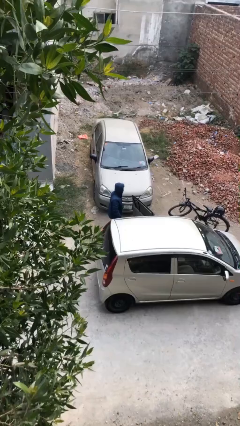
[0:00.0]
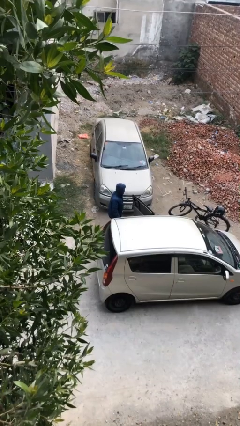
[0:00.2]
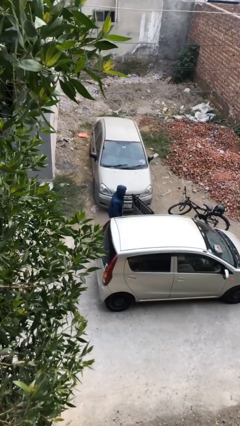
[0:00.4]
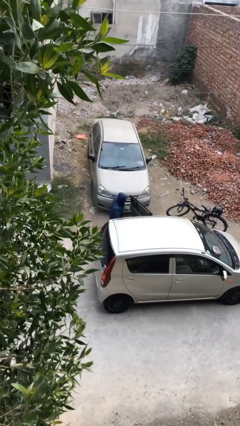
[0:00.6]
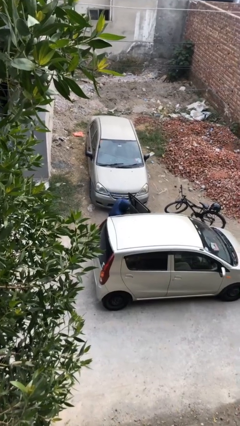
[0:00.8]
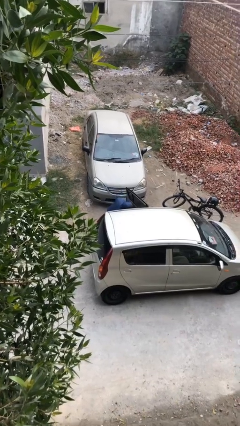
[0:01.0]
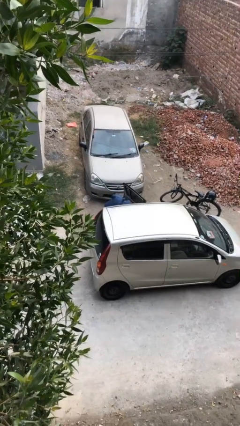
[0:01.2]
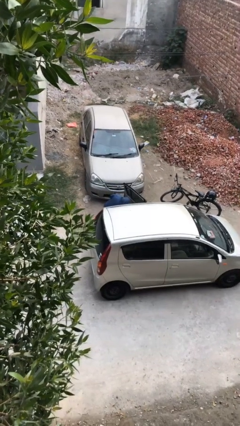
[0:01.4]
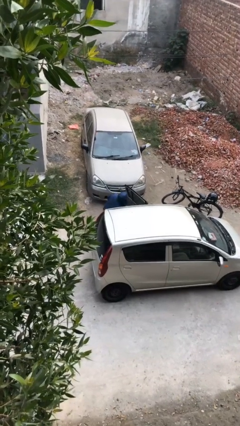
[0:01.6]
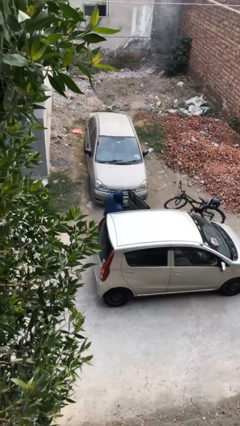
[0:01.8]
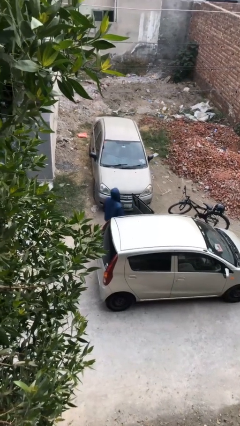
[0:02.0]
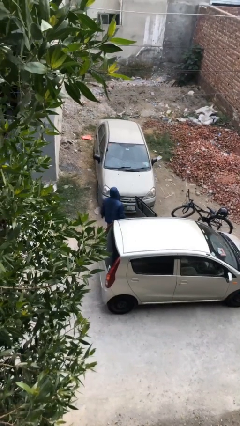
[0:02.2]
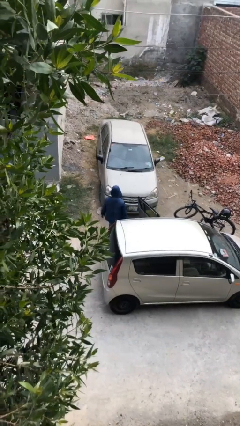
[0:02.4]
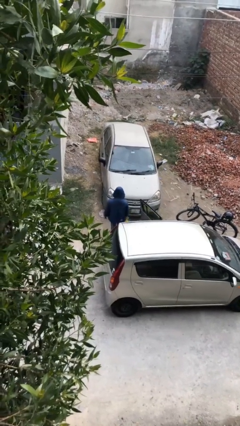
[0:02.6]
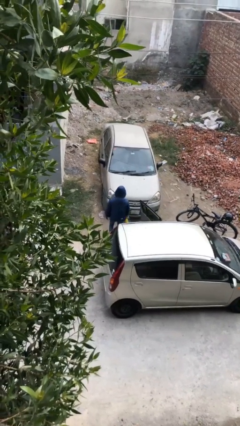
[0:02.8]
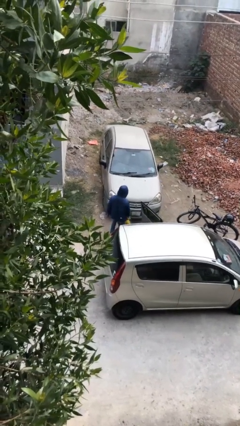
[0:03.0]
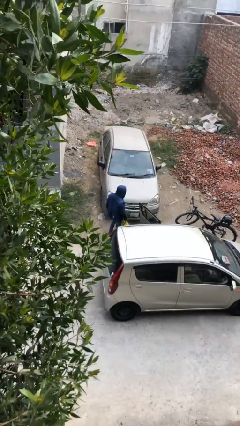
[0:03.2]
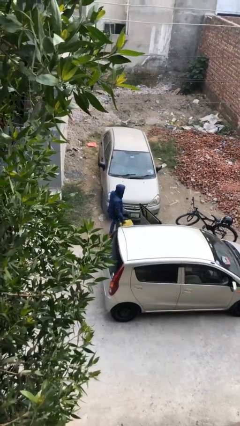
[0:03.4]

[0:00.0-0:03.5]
person unloads car

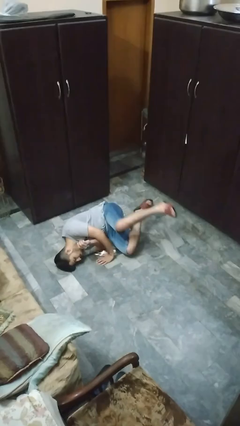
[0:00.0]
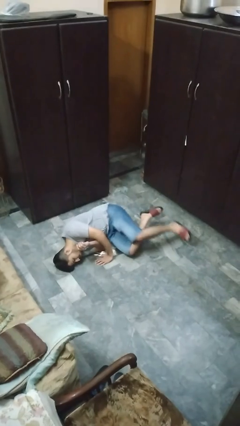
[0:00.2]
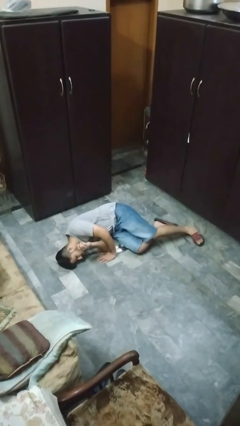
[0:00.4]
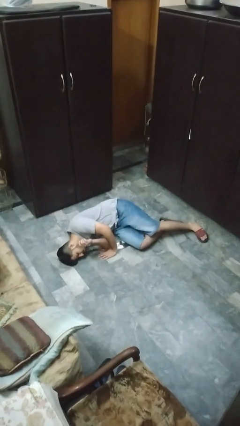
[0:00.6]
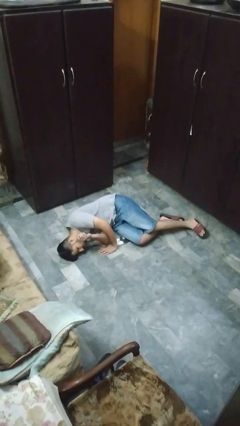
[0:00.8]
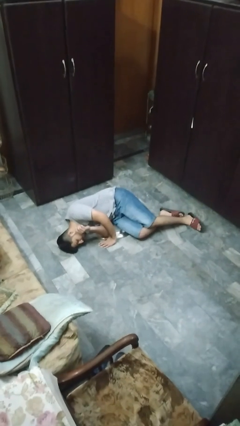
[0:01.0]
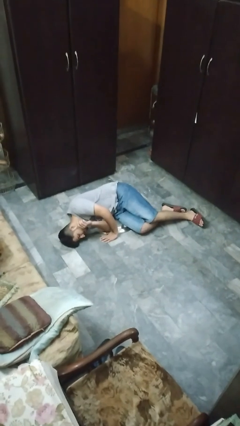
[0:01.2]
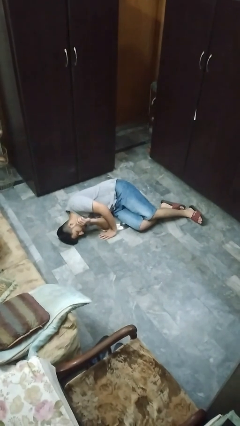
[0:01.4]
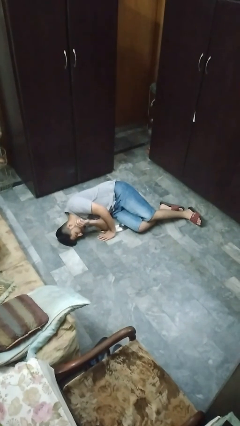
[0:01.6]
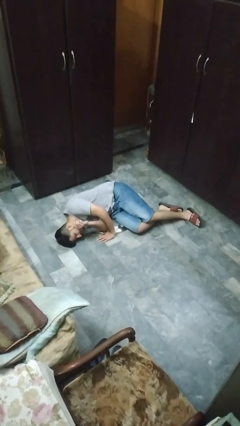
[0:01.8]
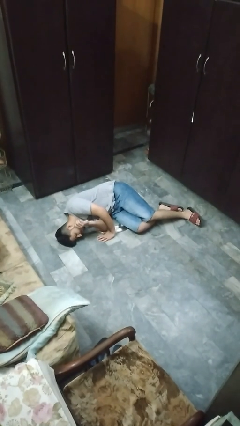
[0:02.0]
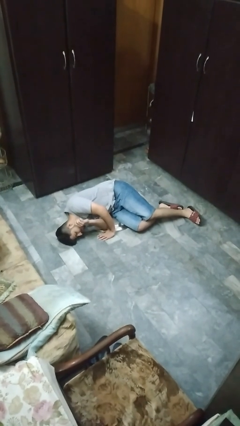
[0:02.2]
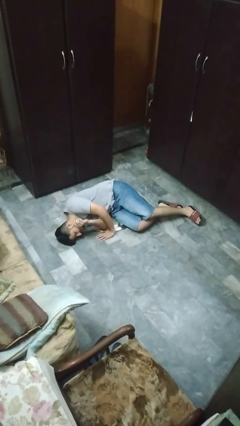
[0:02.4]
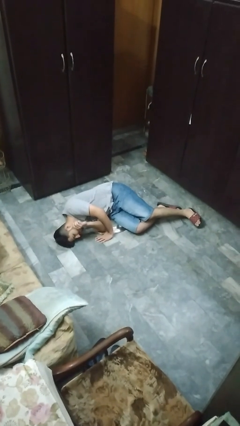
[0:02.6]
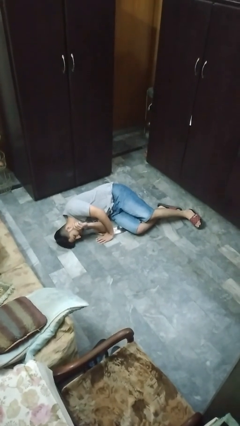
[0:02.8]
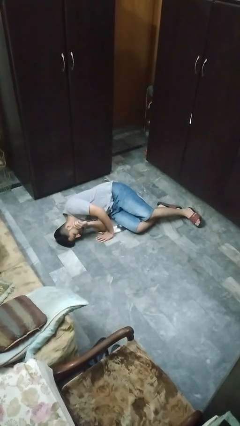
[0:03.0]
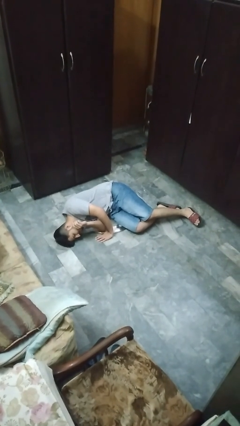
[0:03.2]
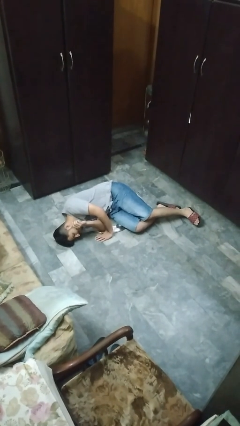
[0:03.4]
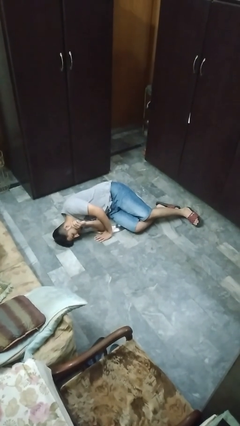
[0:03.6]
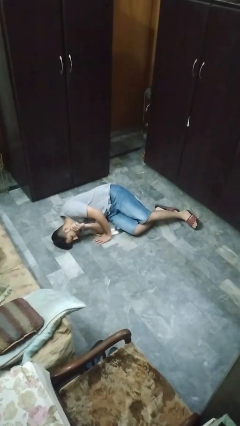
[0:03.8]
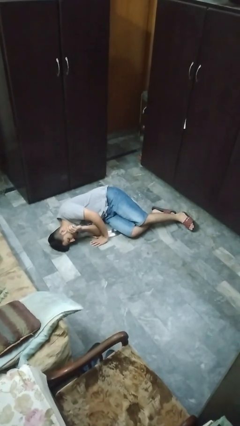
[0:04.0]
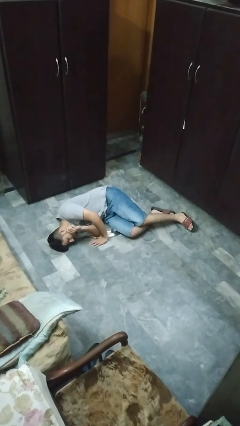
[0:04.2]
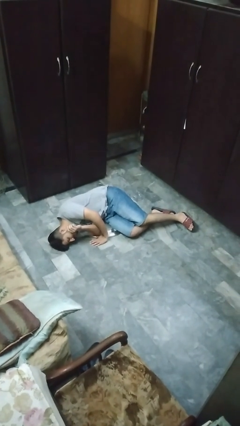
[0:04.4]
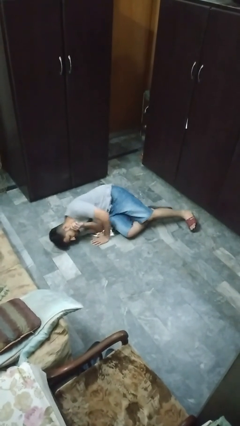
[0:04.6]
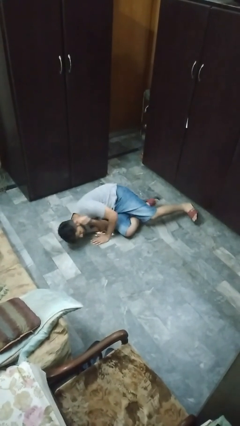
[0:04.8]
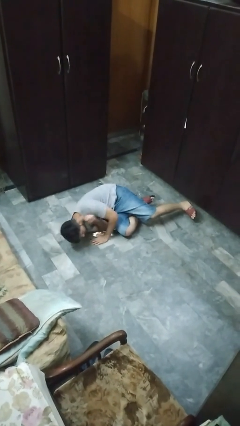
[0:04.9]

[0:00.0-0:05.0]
person lies down on floor

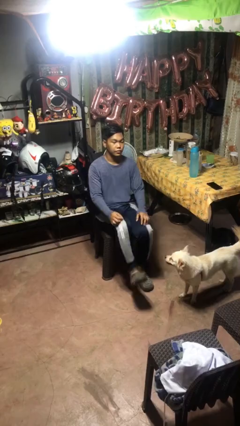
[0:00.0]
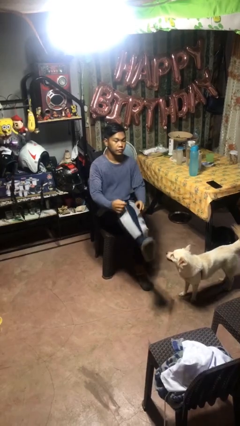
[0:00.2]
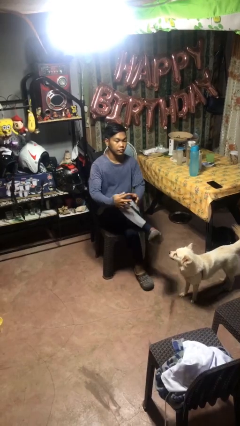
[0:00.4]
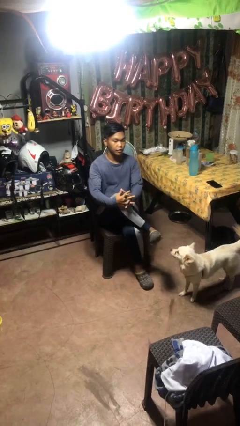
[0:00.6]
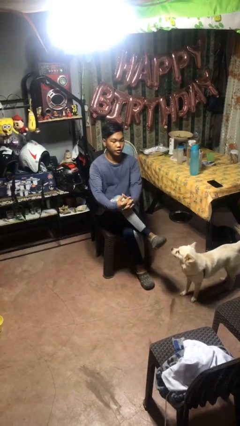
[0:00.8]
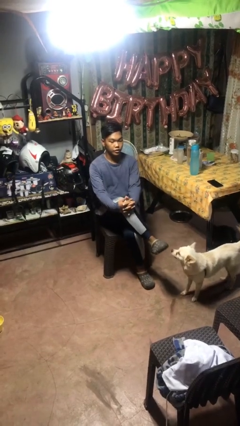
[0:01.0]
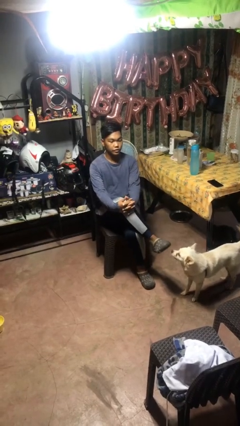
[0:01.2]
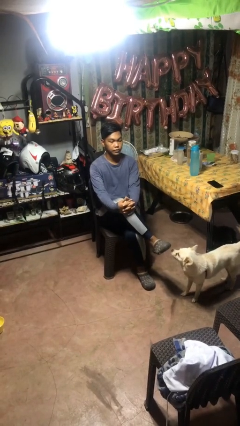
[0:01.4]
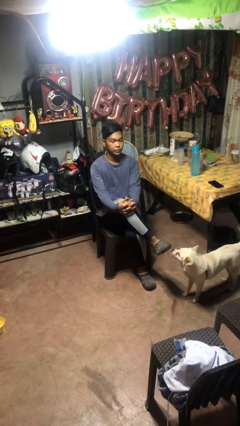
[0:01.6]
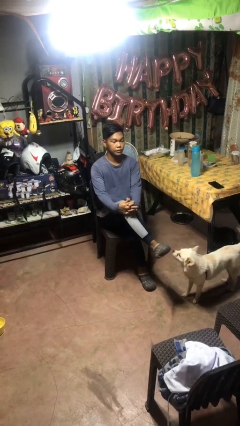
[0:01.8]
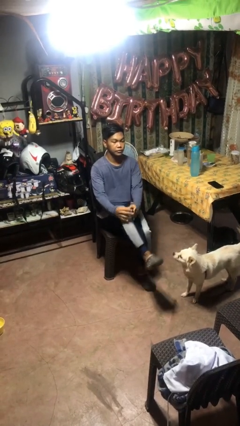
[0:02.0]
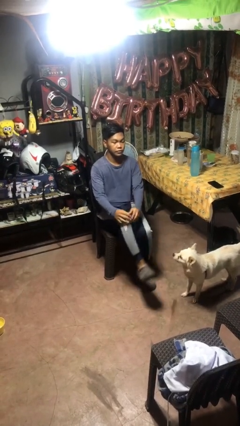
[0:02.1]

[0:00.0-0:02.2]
person crosses legs

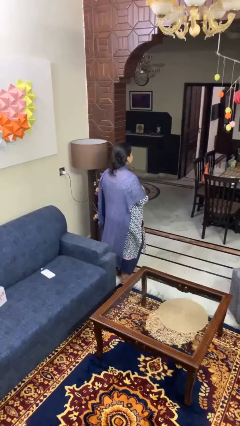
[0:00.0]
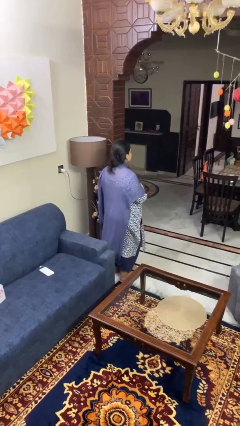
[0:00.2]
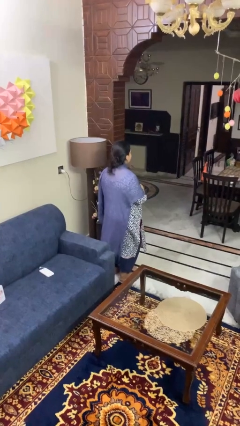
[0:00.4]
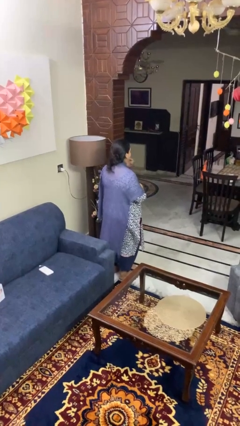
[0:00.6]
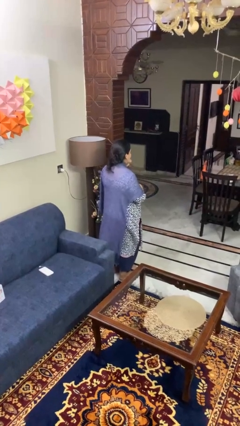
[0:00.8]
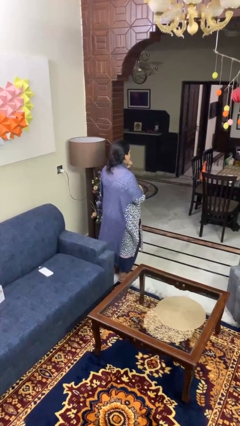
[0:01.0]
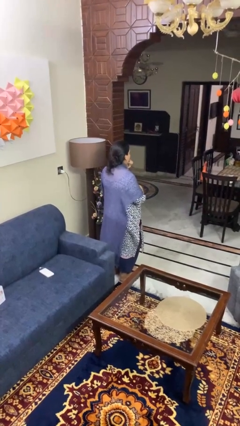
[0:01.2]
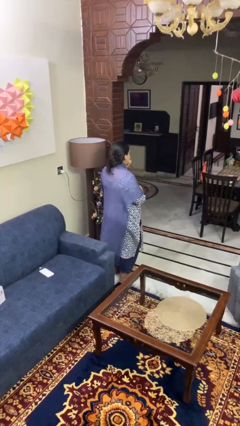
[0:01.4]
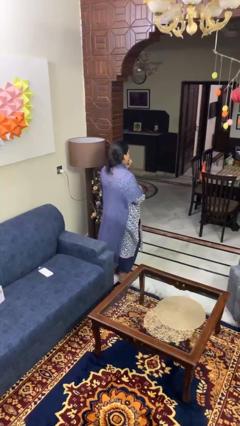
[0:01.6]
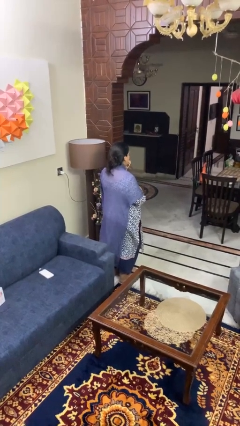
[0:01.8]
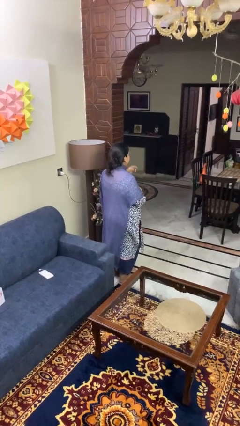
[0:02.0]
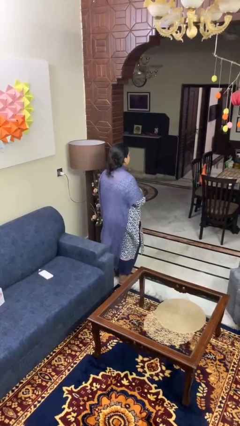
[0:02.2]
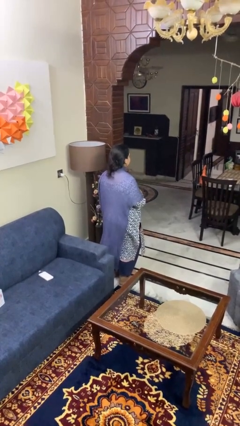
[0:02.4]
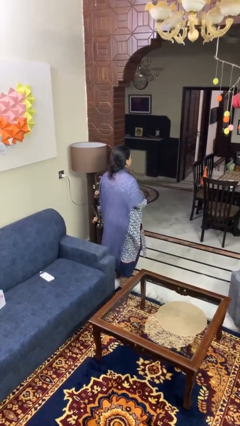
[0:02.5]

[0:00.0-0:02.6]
person licks fingers

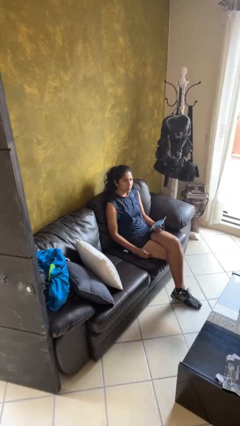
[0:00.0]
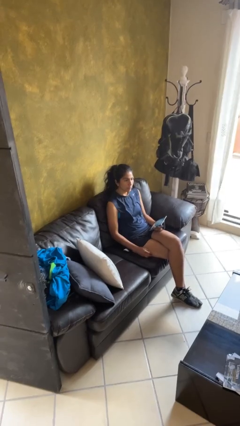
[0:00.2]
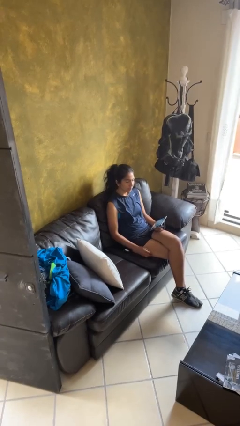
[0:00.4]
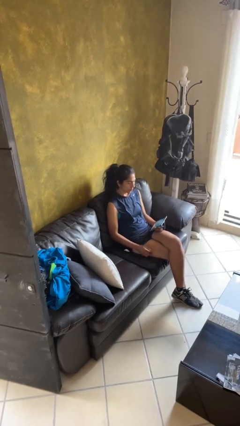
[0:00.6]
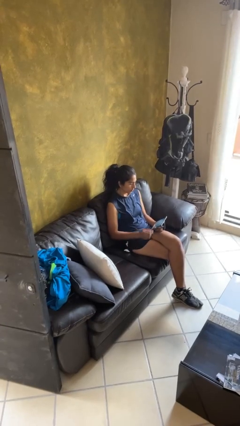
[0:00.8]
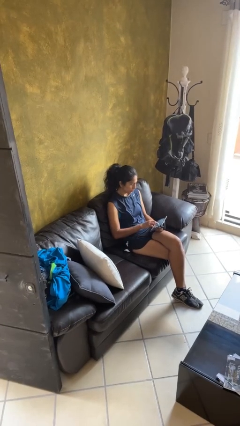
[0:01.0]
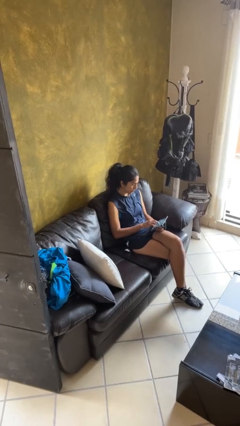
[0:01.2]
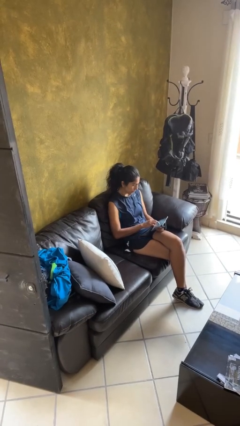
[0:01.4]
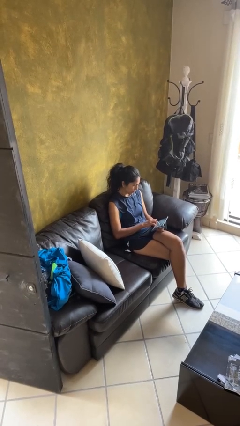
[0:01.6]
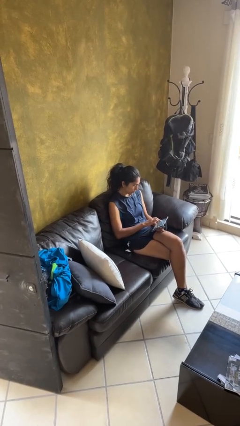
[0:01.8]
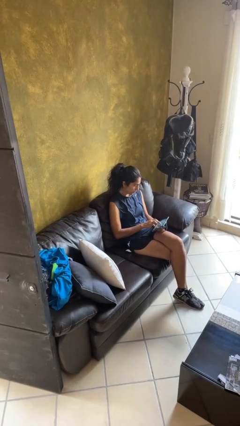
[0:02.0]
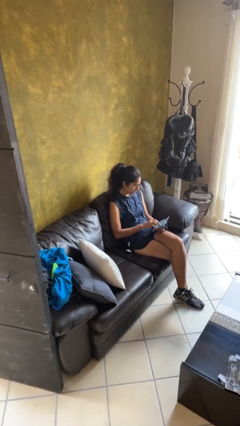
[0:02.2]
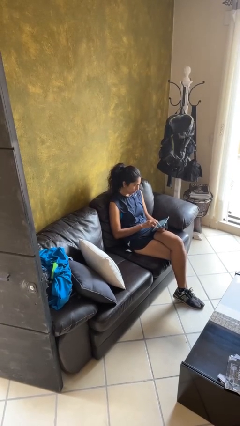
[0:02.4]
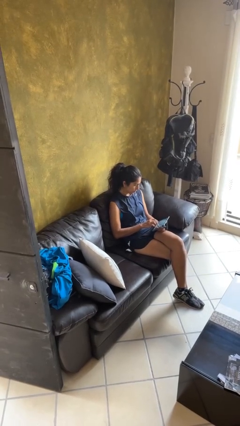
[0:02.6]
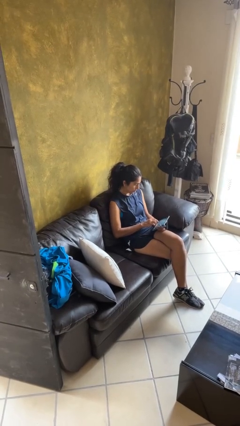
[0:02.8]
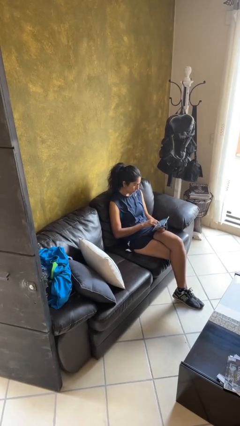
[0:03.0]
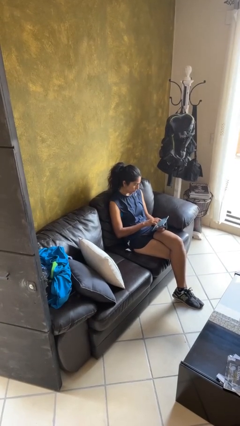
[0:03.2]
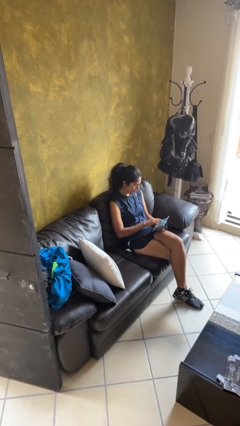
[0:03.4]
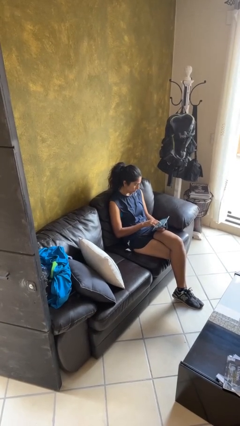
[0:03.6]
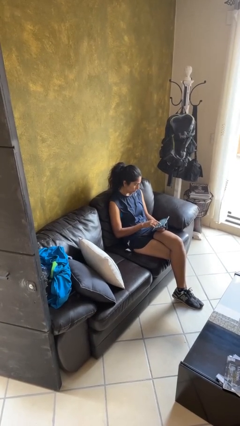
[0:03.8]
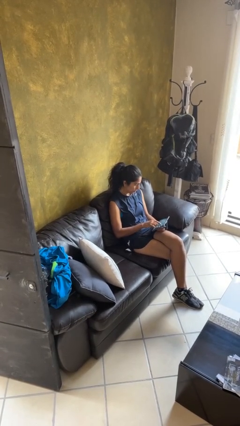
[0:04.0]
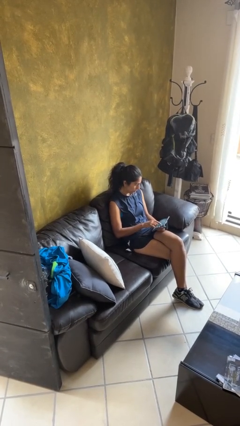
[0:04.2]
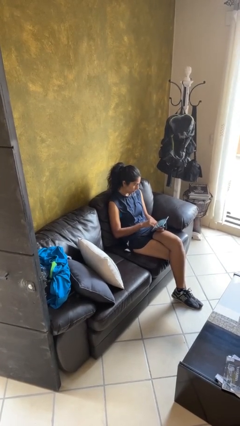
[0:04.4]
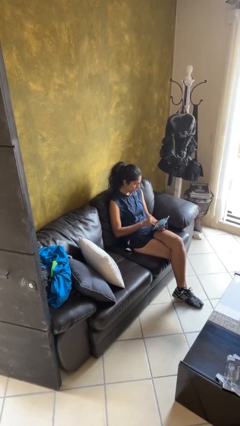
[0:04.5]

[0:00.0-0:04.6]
person interacts with tablet
